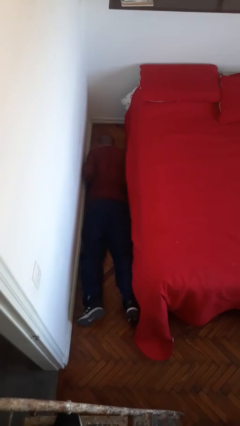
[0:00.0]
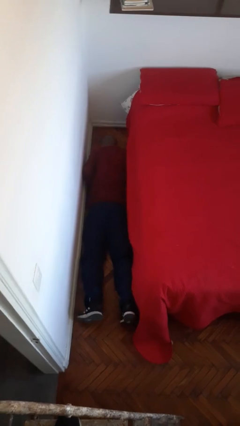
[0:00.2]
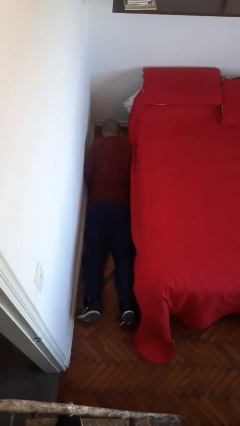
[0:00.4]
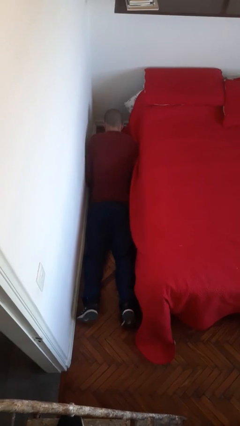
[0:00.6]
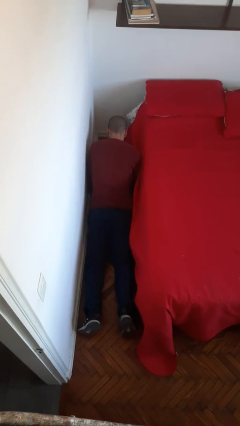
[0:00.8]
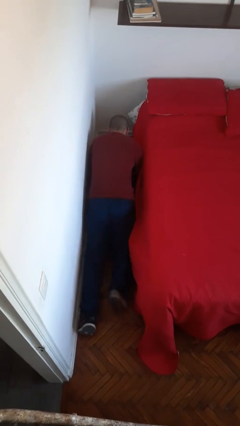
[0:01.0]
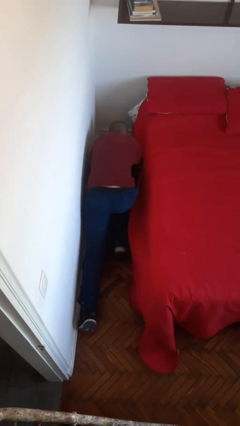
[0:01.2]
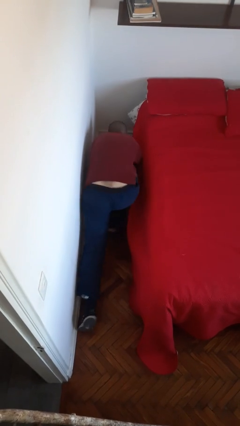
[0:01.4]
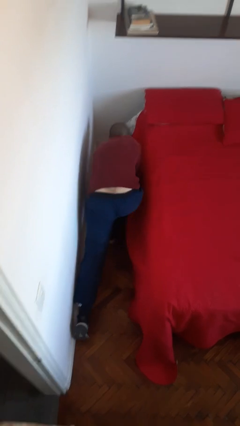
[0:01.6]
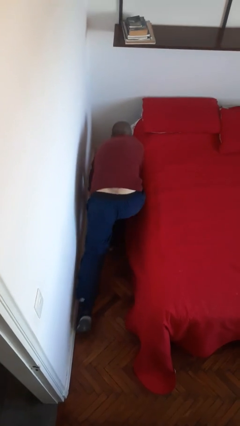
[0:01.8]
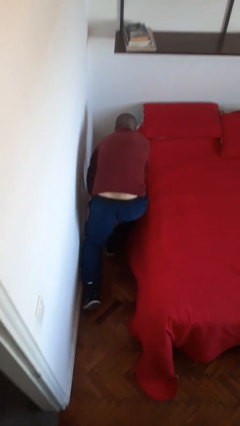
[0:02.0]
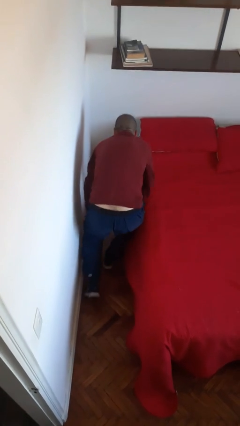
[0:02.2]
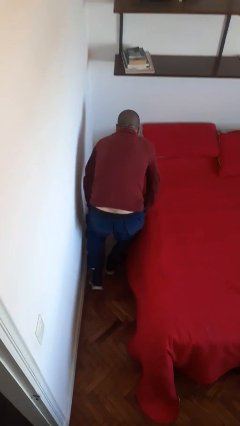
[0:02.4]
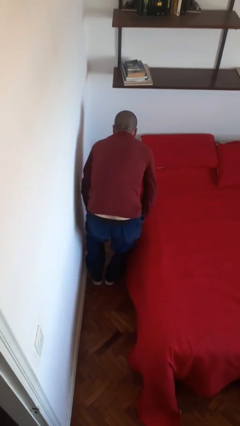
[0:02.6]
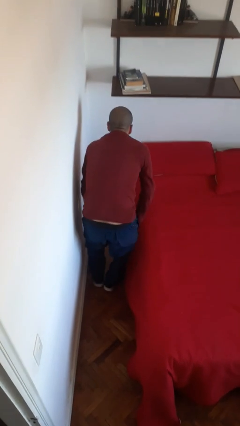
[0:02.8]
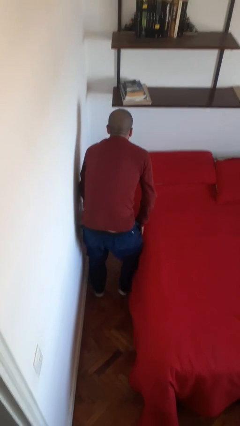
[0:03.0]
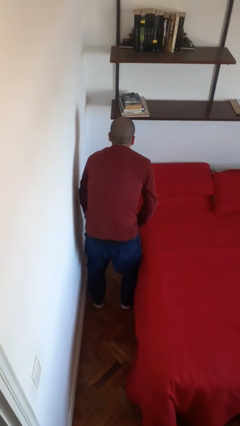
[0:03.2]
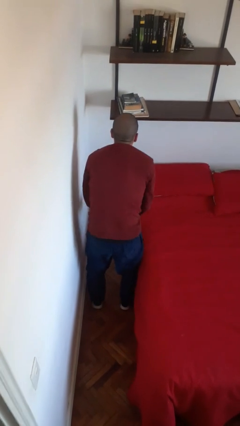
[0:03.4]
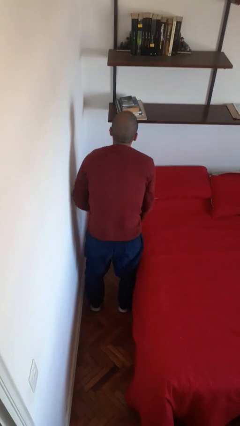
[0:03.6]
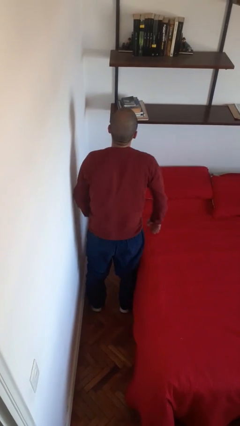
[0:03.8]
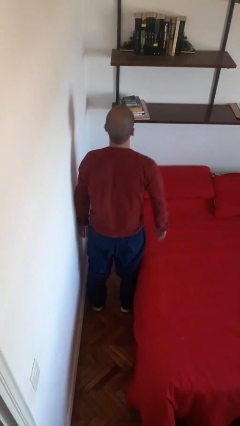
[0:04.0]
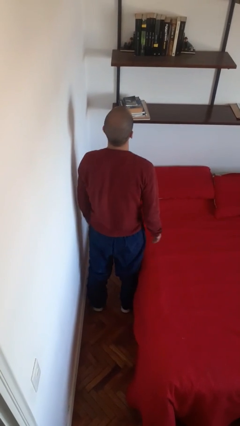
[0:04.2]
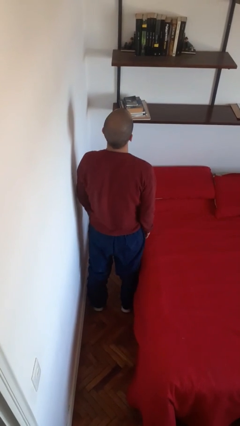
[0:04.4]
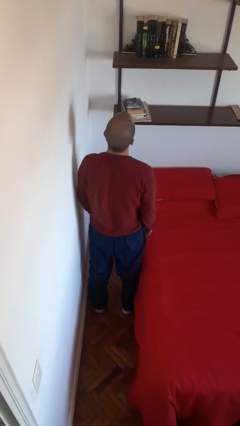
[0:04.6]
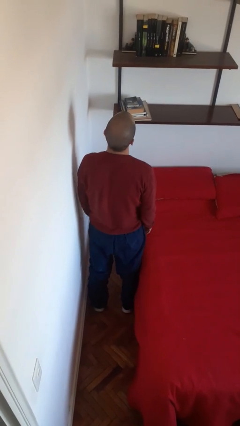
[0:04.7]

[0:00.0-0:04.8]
person stands up from floor

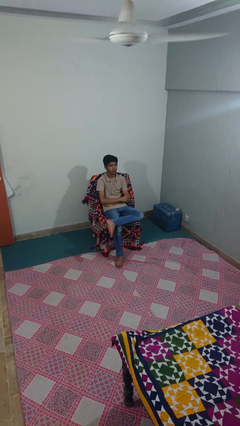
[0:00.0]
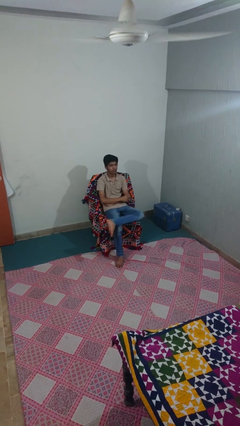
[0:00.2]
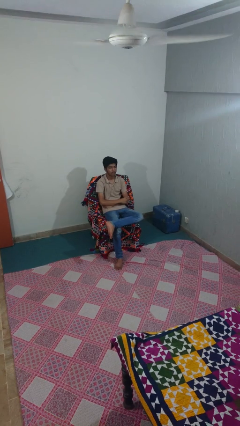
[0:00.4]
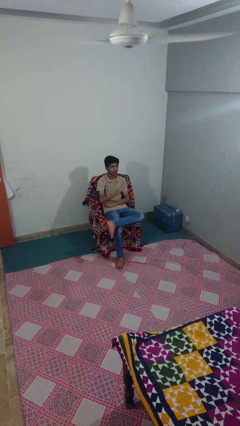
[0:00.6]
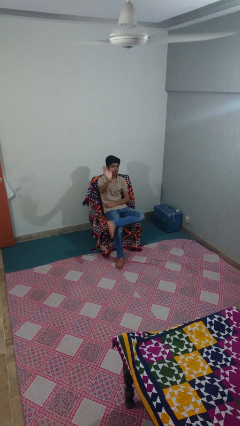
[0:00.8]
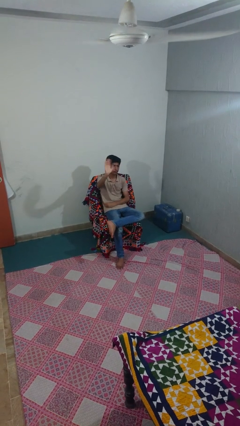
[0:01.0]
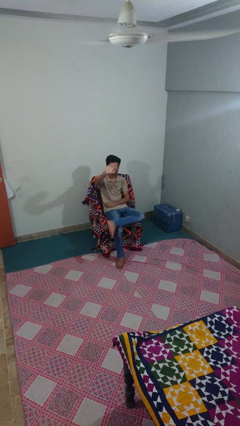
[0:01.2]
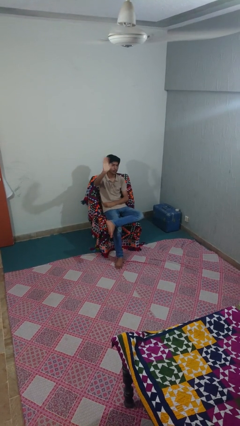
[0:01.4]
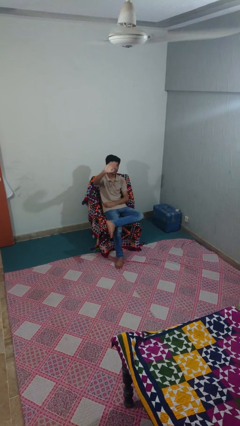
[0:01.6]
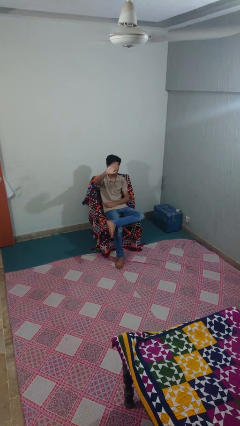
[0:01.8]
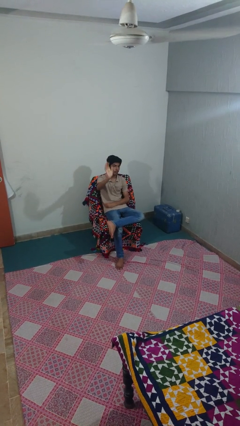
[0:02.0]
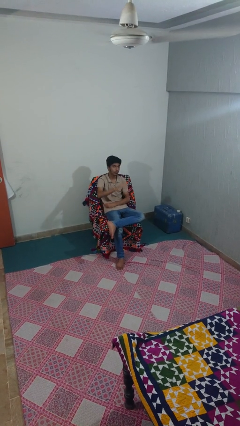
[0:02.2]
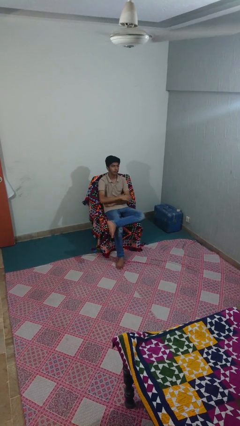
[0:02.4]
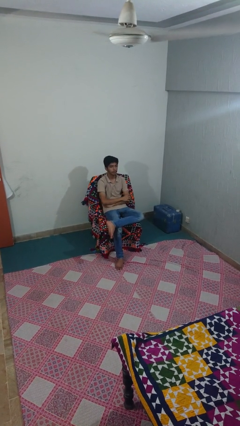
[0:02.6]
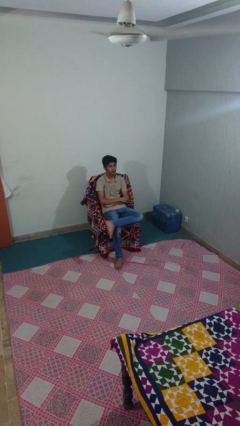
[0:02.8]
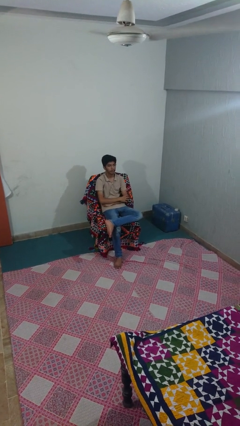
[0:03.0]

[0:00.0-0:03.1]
person waves at person

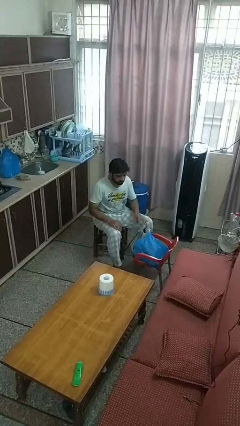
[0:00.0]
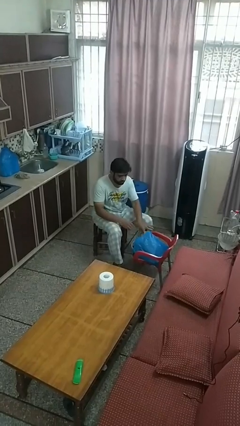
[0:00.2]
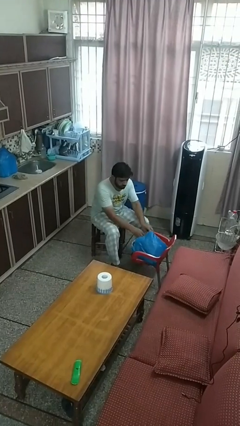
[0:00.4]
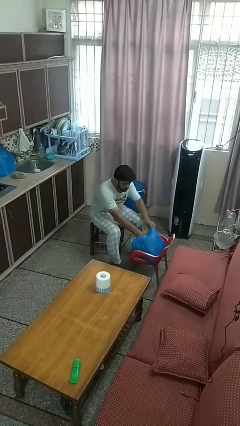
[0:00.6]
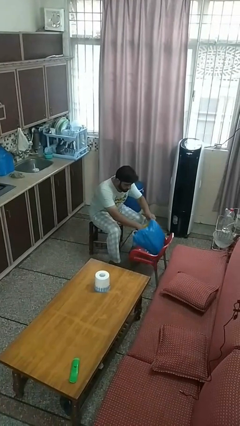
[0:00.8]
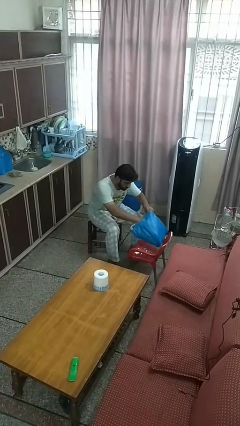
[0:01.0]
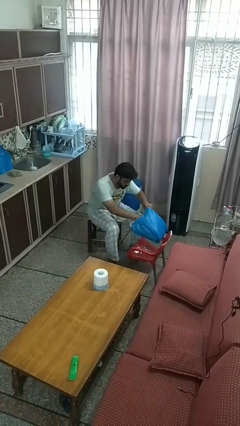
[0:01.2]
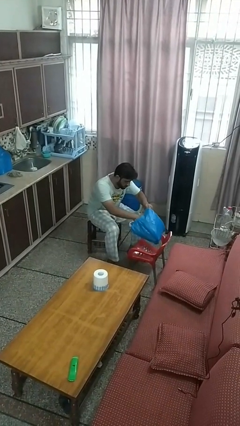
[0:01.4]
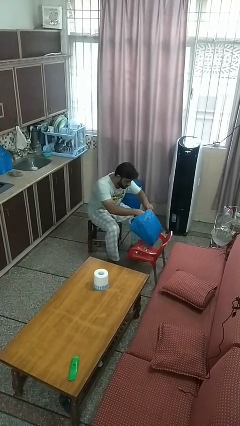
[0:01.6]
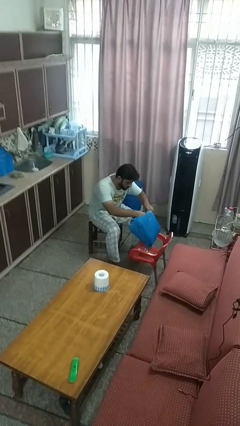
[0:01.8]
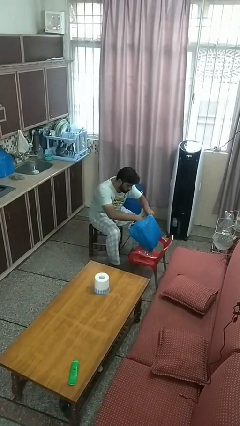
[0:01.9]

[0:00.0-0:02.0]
person searches in bag

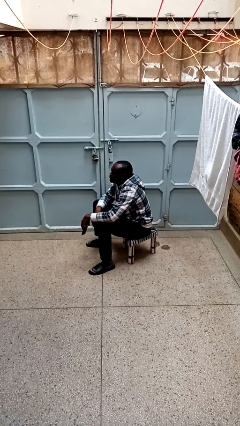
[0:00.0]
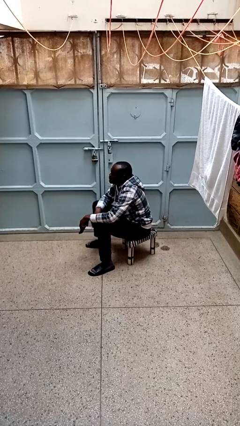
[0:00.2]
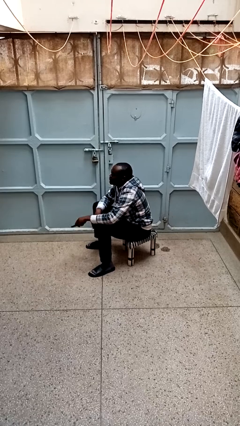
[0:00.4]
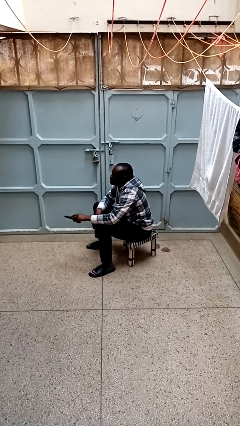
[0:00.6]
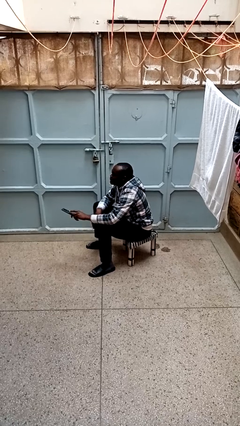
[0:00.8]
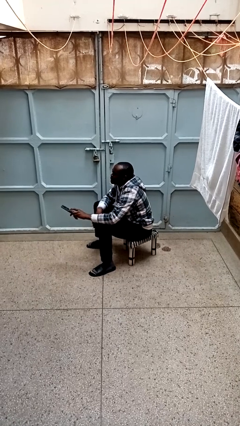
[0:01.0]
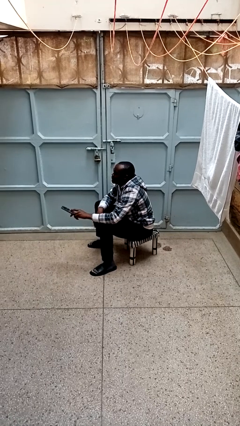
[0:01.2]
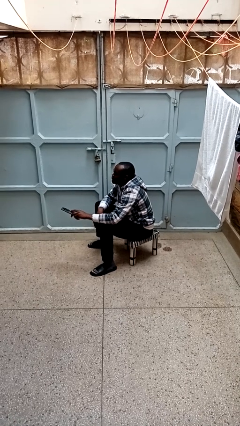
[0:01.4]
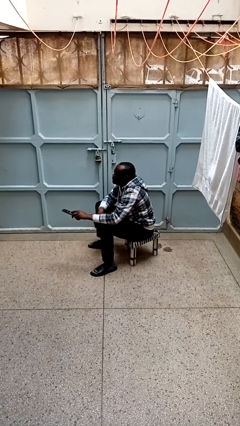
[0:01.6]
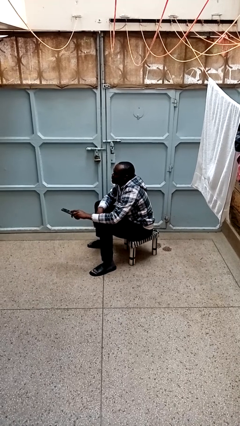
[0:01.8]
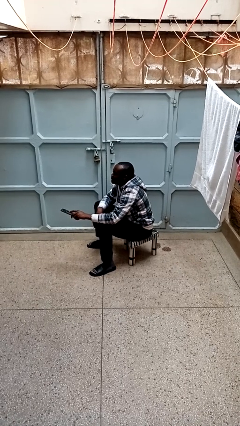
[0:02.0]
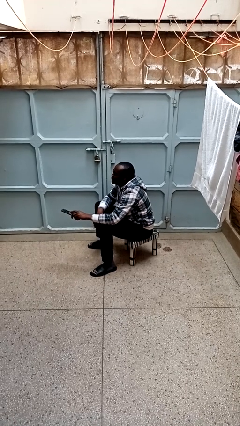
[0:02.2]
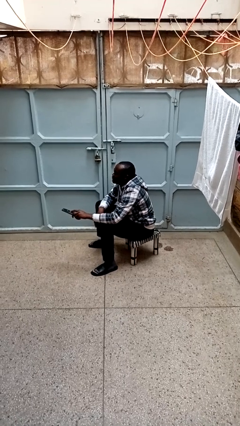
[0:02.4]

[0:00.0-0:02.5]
person uses television remote

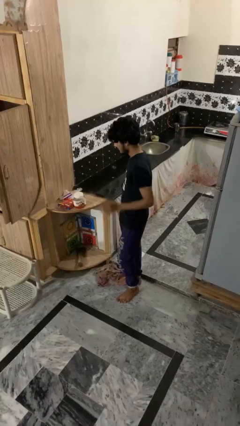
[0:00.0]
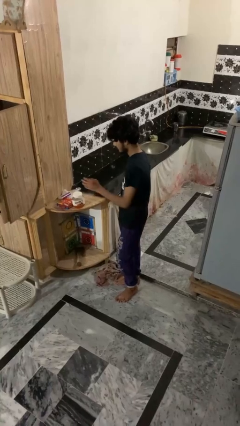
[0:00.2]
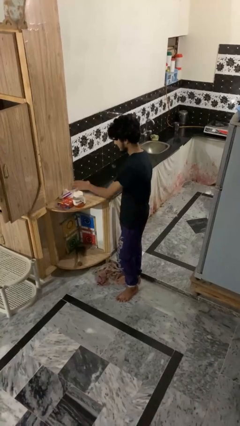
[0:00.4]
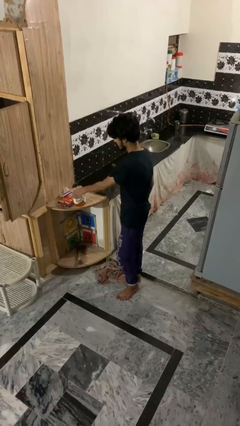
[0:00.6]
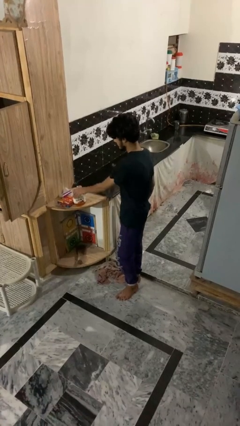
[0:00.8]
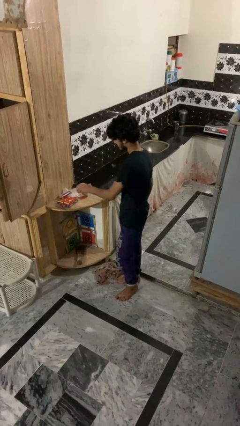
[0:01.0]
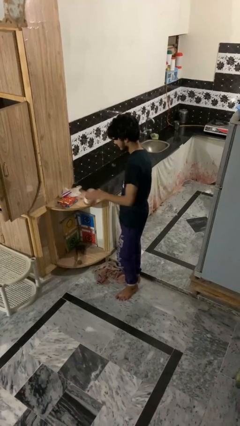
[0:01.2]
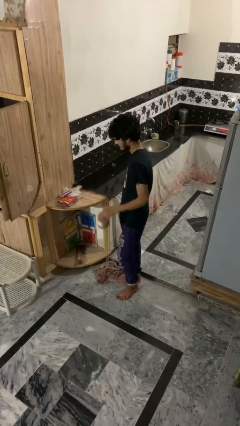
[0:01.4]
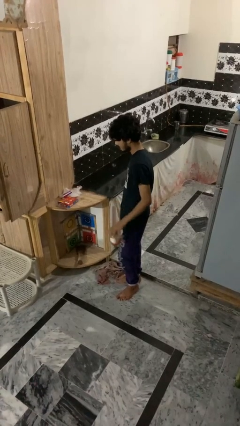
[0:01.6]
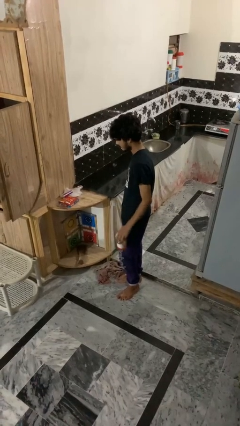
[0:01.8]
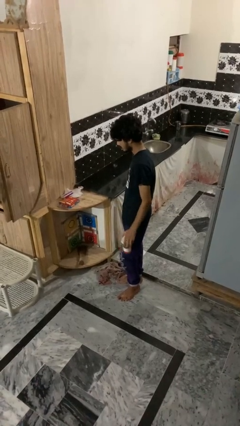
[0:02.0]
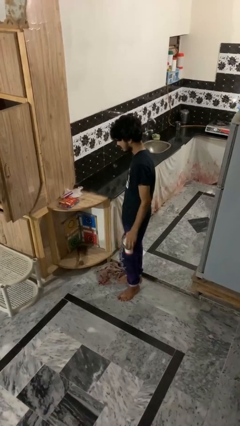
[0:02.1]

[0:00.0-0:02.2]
person picks up object from countertop

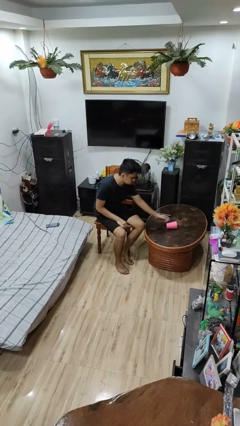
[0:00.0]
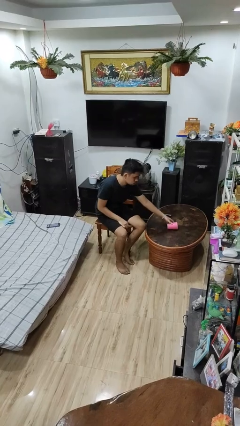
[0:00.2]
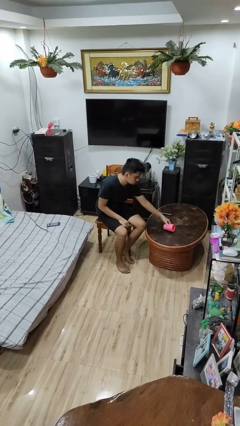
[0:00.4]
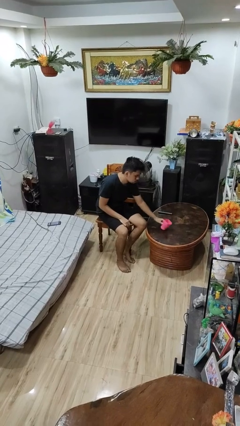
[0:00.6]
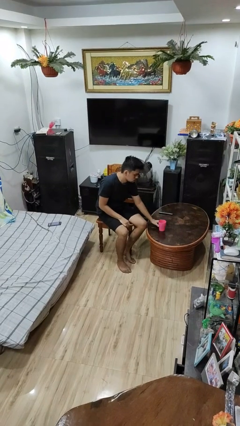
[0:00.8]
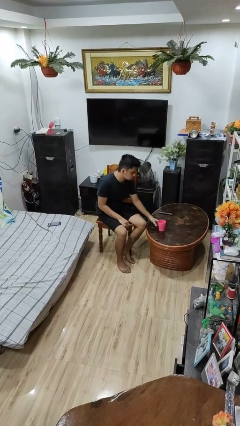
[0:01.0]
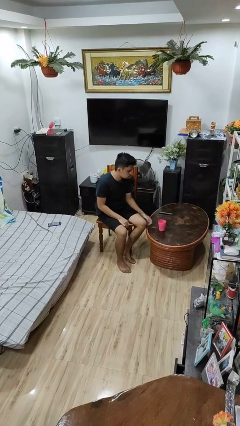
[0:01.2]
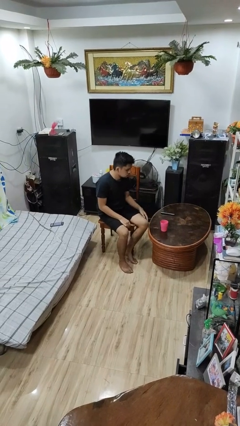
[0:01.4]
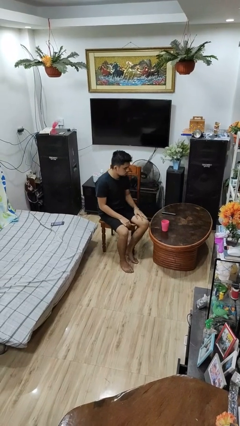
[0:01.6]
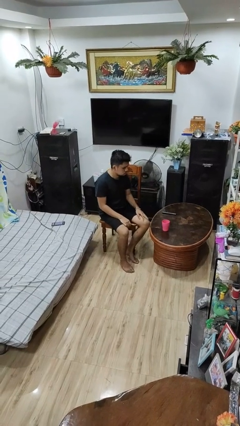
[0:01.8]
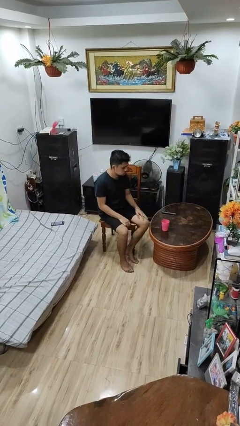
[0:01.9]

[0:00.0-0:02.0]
person sets upright glass

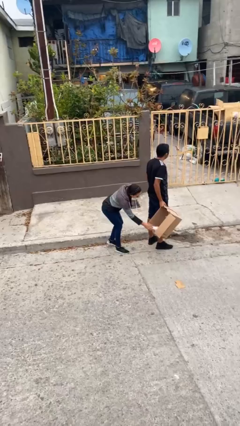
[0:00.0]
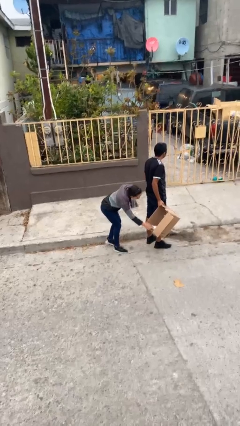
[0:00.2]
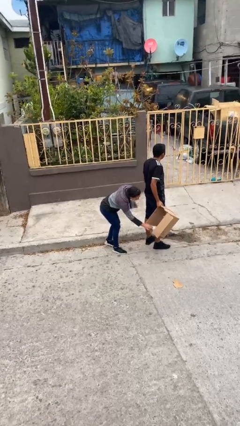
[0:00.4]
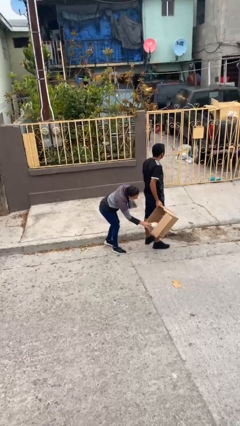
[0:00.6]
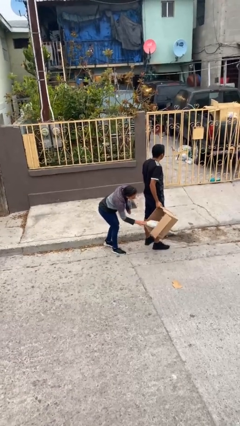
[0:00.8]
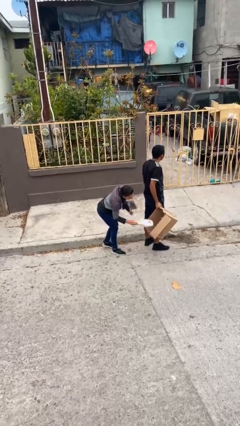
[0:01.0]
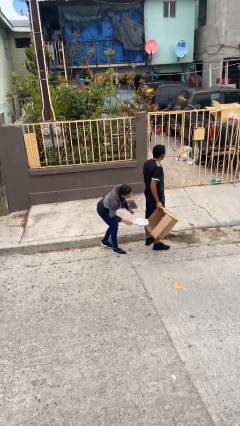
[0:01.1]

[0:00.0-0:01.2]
person steals object from person
